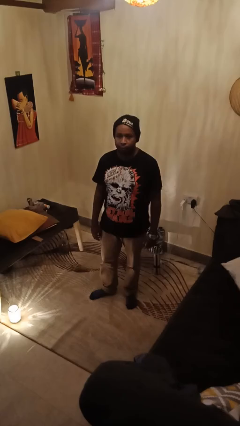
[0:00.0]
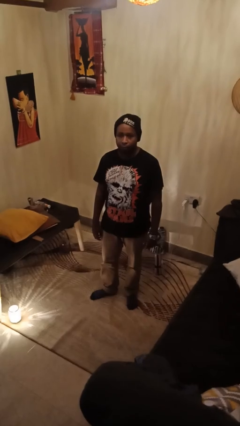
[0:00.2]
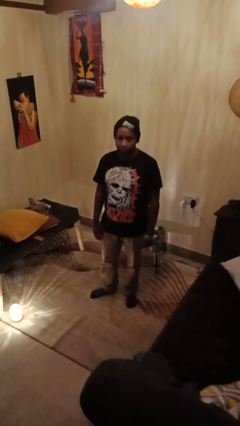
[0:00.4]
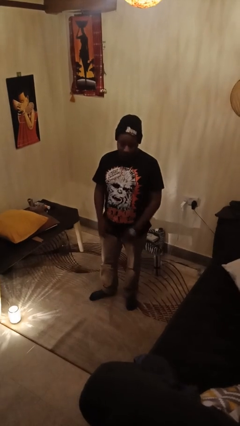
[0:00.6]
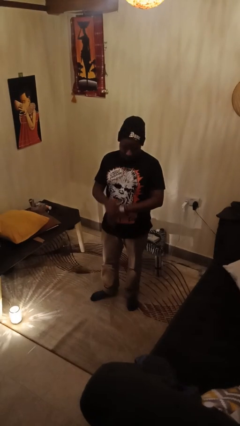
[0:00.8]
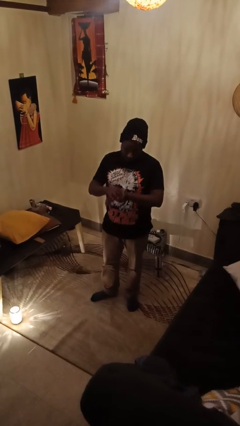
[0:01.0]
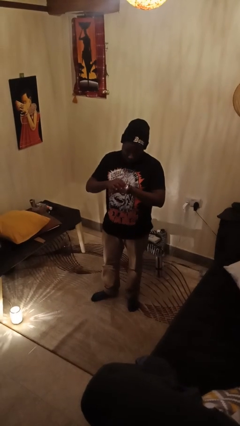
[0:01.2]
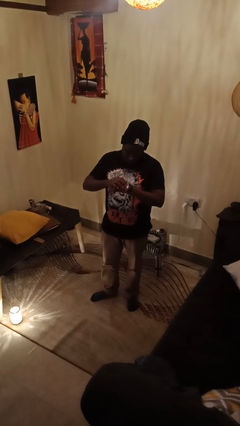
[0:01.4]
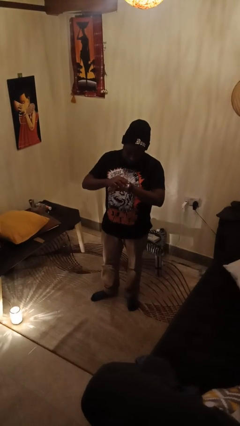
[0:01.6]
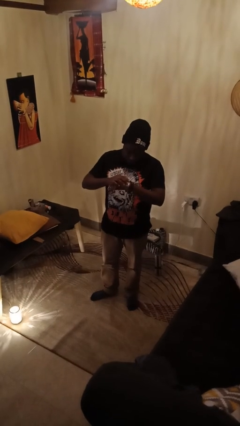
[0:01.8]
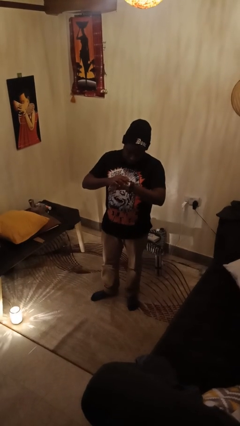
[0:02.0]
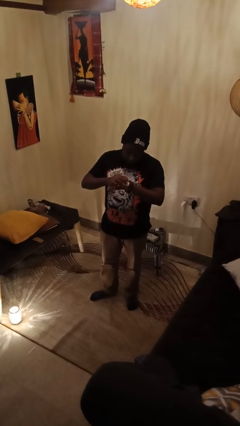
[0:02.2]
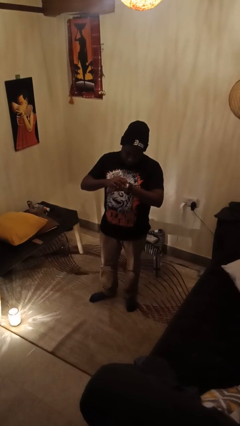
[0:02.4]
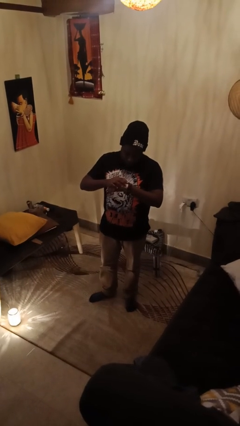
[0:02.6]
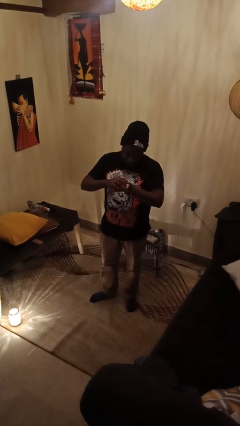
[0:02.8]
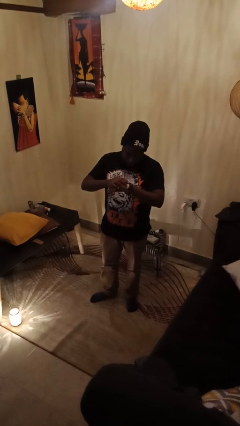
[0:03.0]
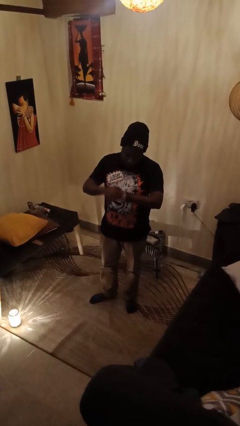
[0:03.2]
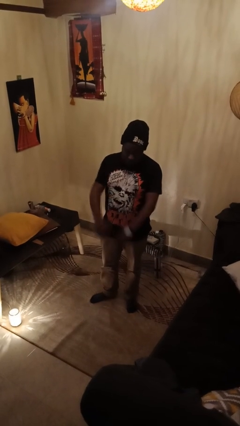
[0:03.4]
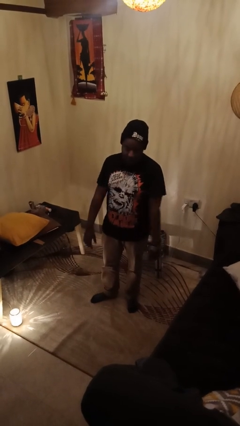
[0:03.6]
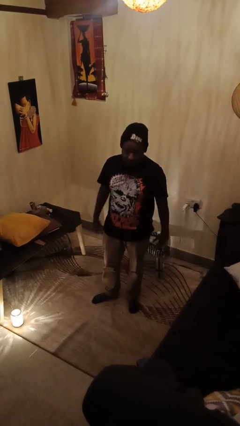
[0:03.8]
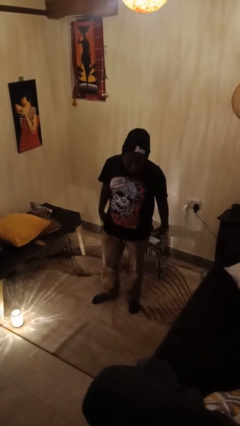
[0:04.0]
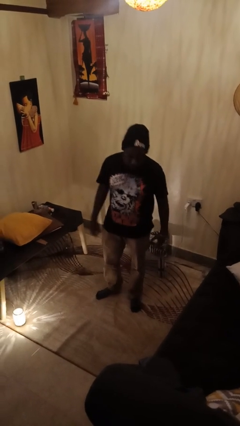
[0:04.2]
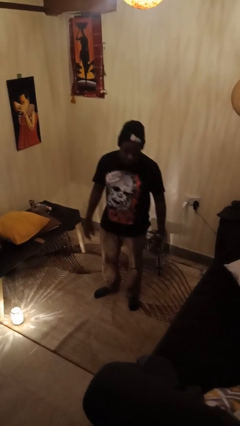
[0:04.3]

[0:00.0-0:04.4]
person looks at wristwatch

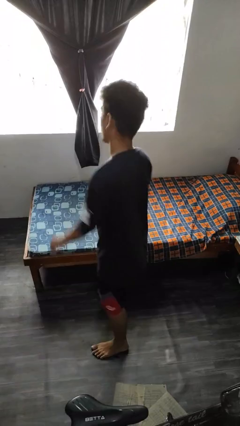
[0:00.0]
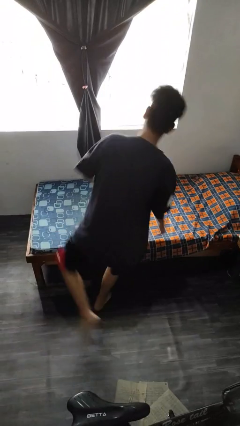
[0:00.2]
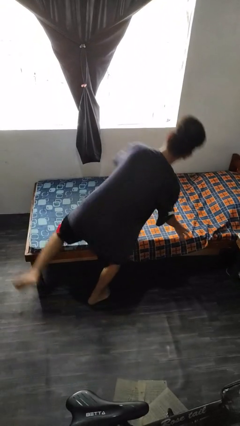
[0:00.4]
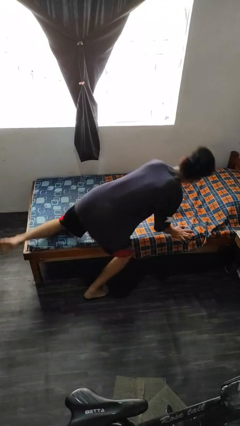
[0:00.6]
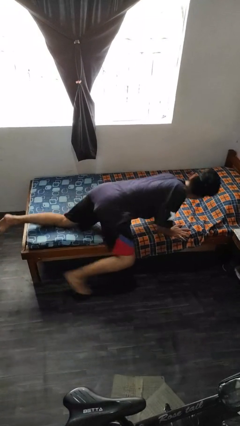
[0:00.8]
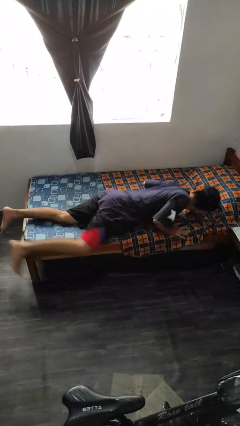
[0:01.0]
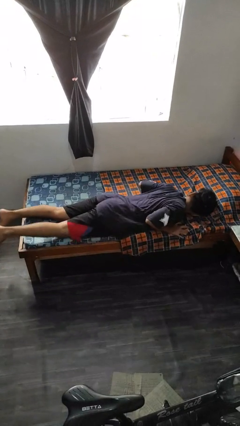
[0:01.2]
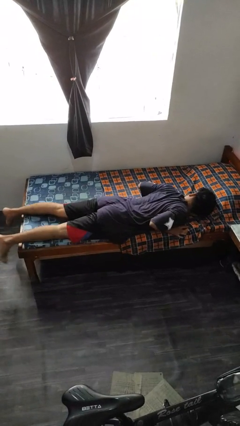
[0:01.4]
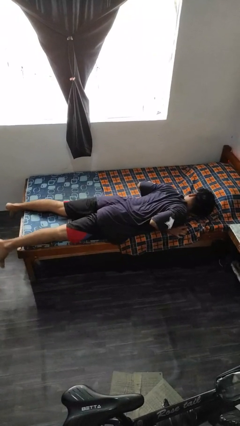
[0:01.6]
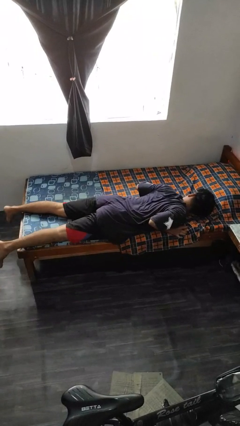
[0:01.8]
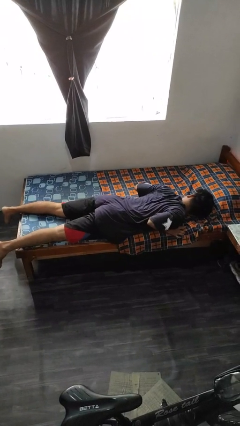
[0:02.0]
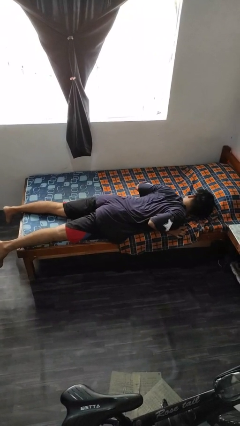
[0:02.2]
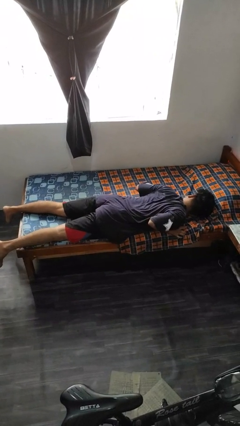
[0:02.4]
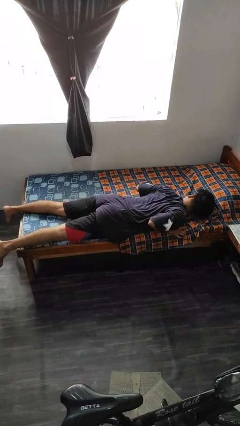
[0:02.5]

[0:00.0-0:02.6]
person lies down on bed

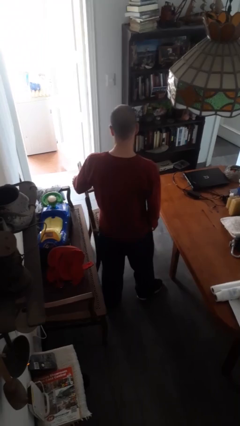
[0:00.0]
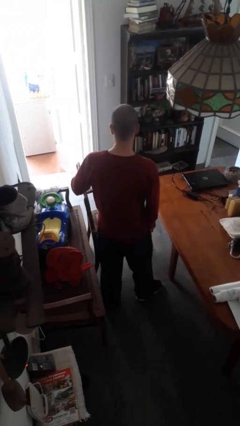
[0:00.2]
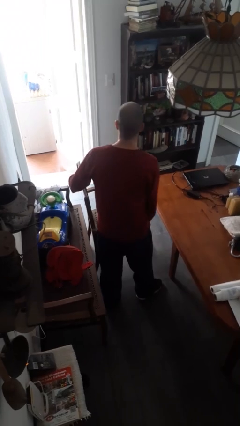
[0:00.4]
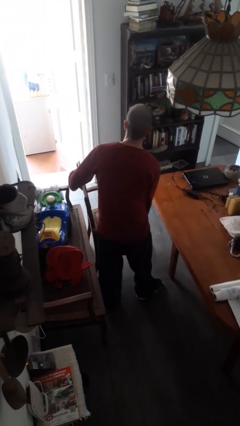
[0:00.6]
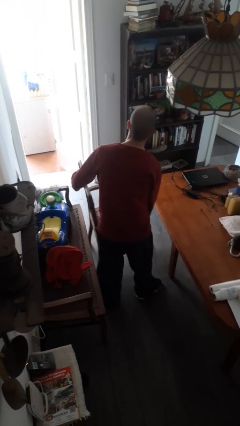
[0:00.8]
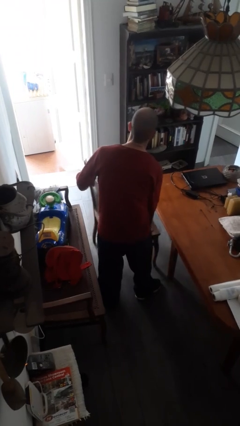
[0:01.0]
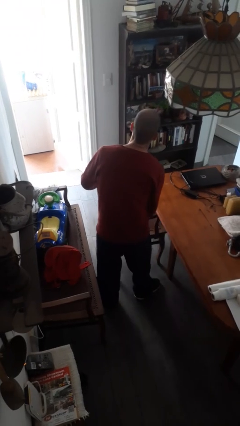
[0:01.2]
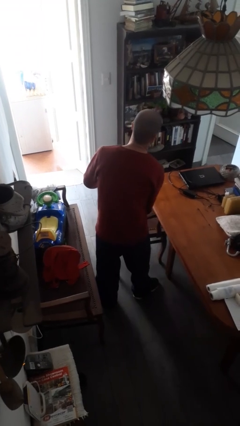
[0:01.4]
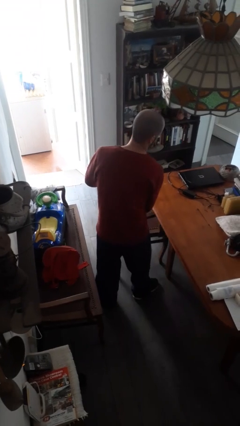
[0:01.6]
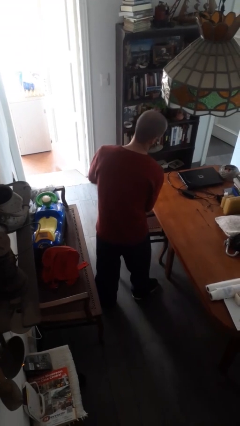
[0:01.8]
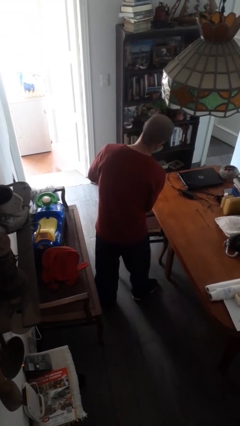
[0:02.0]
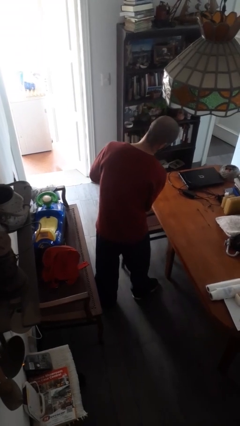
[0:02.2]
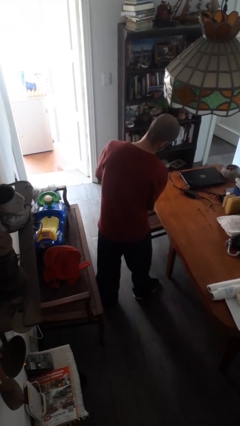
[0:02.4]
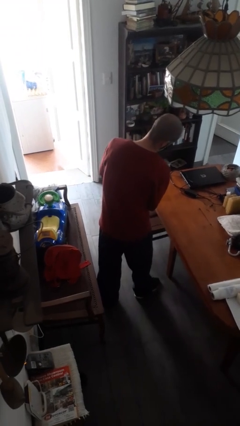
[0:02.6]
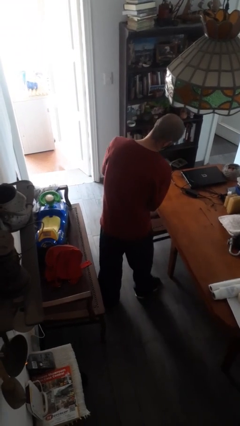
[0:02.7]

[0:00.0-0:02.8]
person pushes in chair

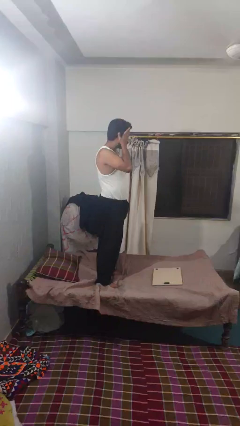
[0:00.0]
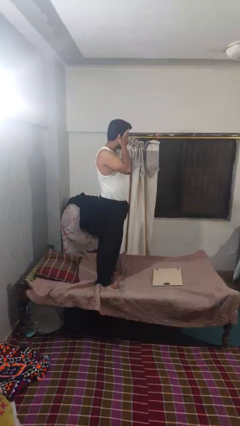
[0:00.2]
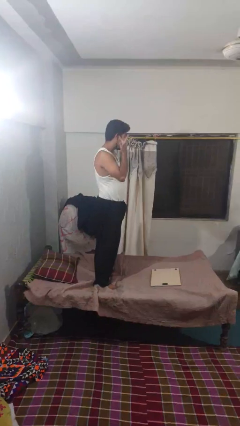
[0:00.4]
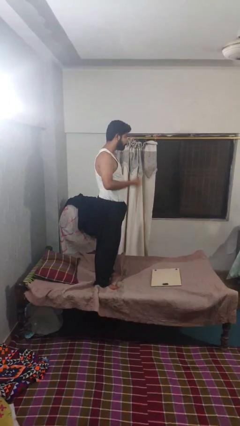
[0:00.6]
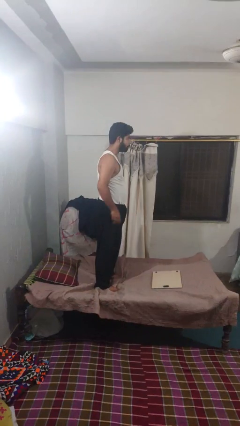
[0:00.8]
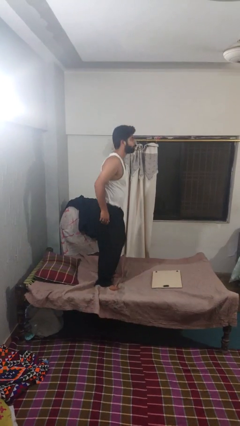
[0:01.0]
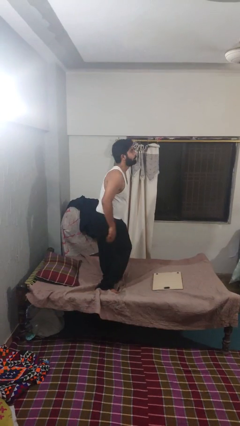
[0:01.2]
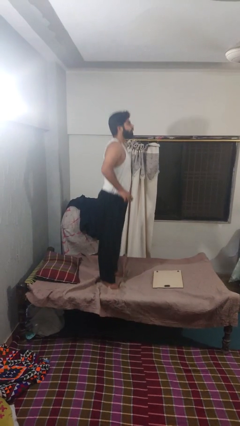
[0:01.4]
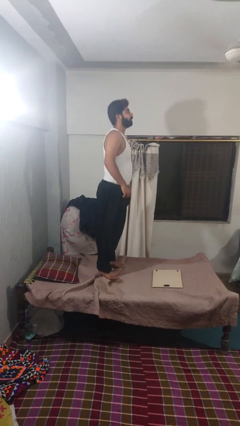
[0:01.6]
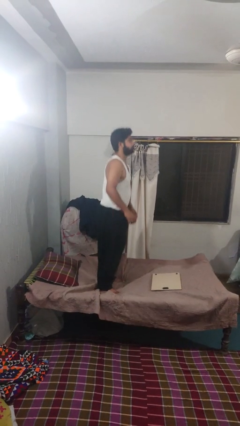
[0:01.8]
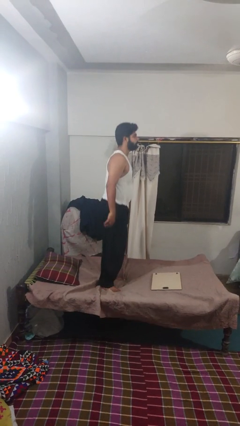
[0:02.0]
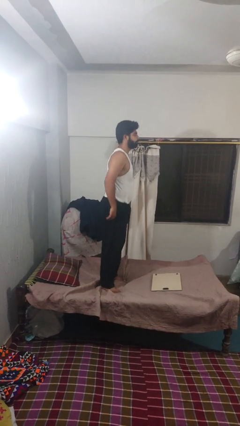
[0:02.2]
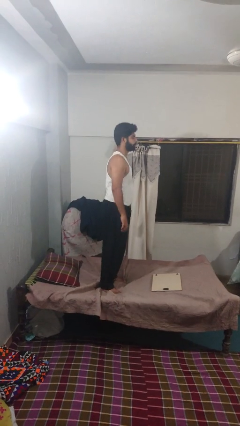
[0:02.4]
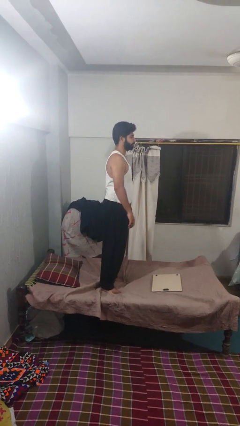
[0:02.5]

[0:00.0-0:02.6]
person jumps on bed

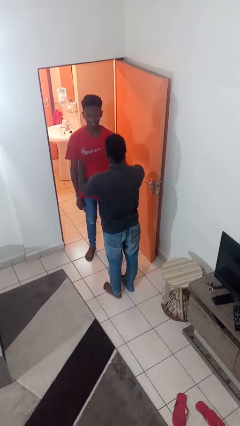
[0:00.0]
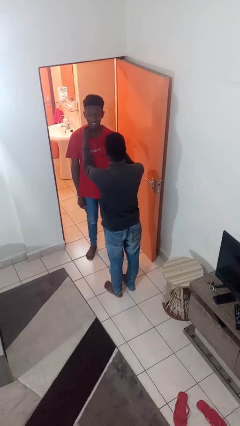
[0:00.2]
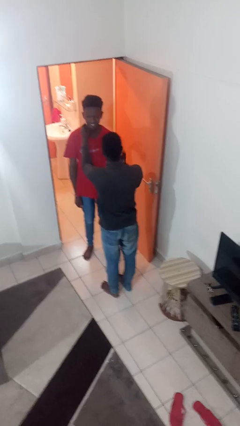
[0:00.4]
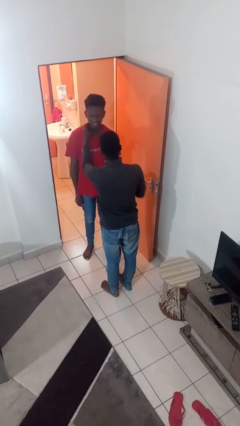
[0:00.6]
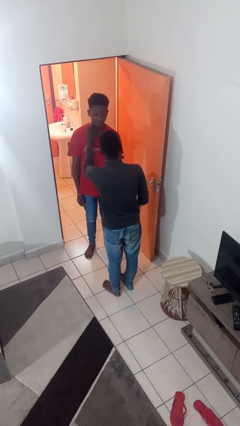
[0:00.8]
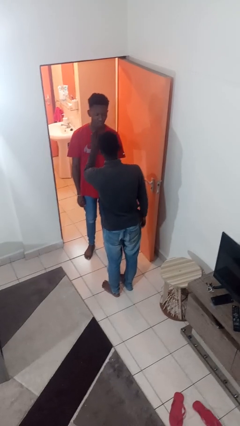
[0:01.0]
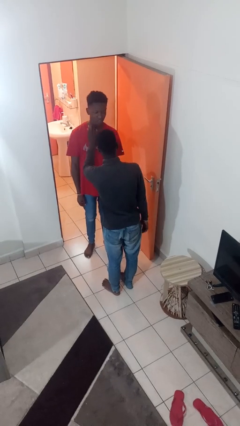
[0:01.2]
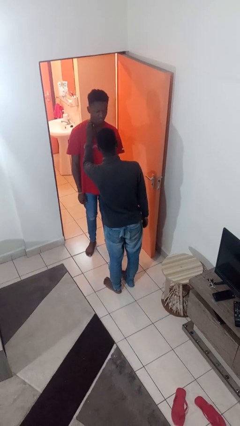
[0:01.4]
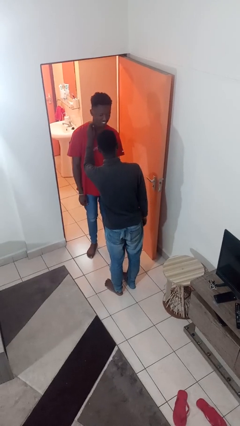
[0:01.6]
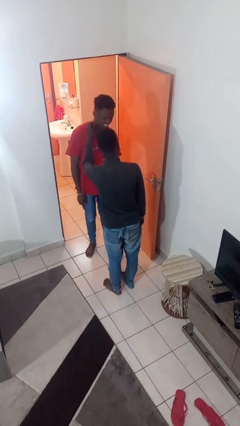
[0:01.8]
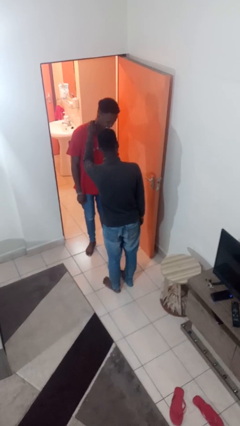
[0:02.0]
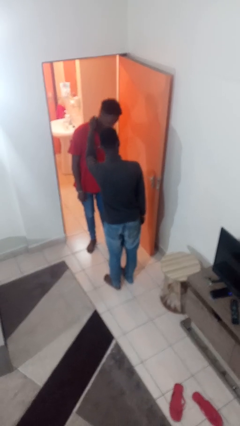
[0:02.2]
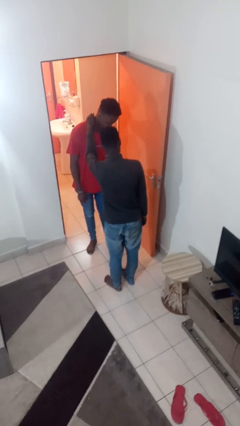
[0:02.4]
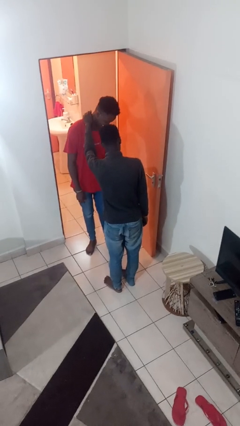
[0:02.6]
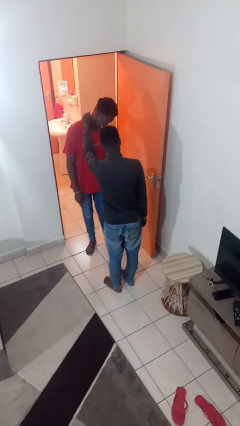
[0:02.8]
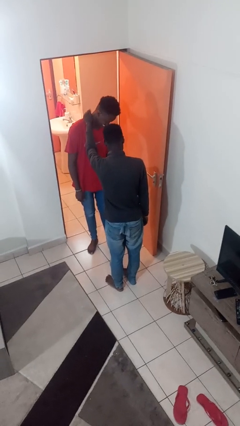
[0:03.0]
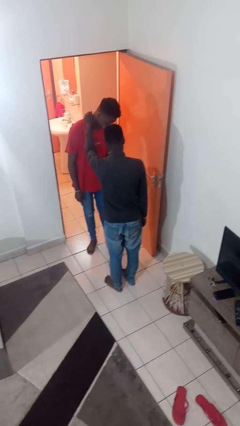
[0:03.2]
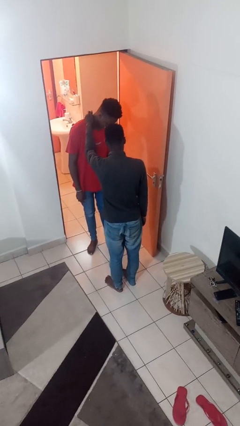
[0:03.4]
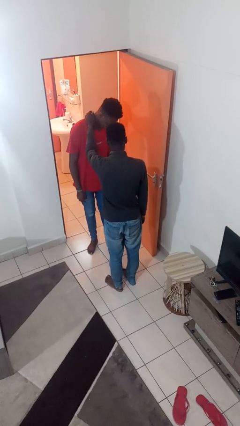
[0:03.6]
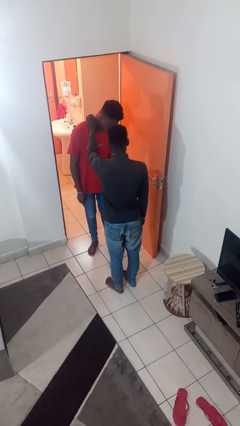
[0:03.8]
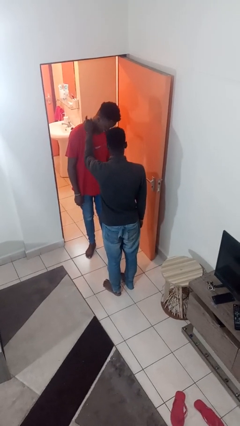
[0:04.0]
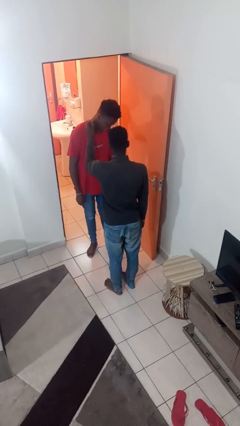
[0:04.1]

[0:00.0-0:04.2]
person tickles person

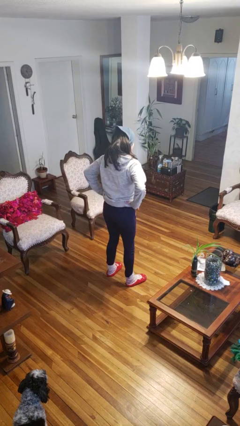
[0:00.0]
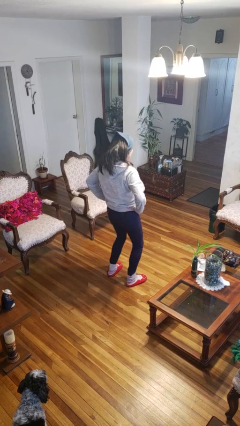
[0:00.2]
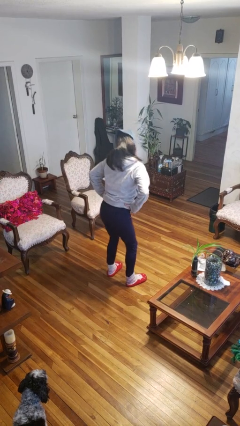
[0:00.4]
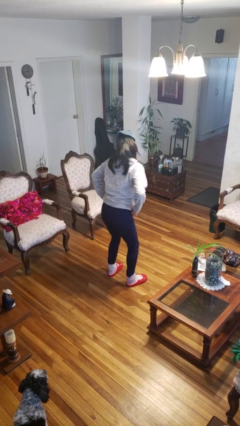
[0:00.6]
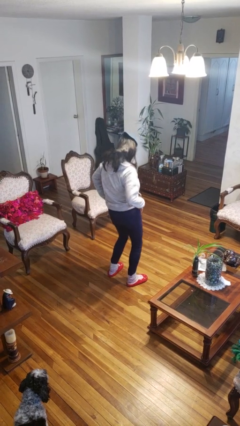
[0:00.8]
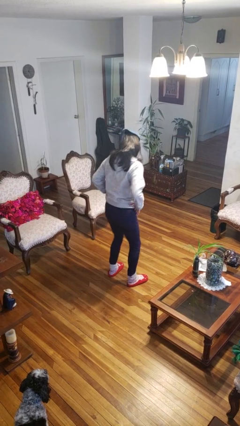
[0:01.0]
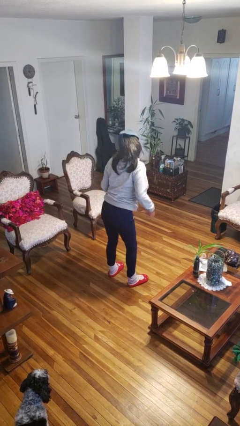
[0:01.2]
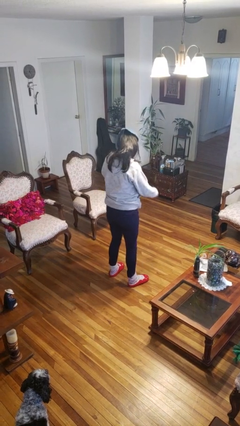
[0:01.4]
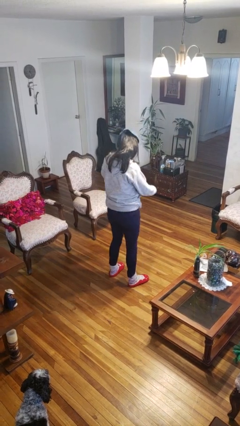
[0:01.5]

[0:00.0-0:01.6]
person wiggles hips
